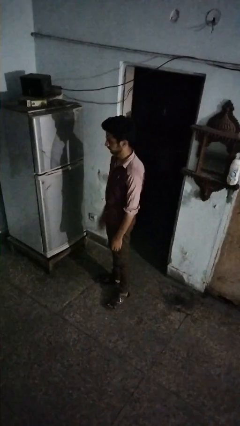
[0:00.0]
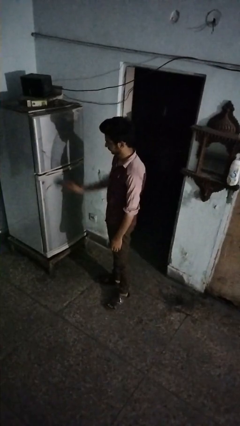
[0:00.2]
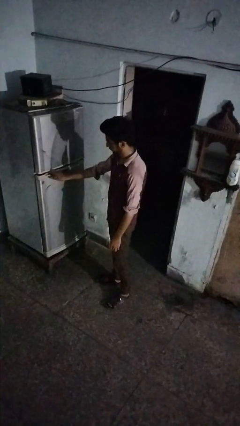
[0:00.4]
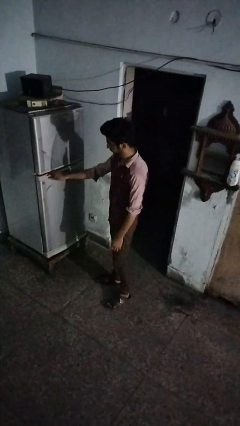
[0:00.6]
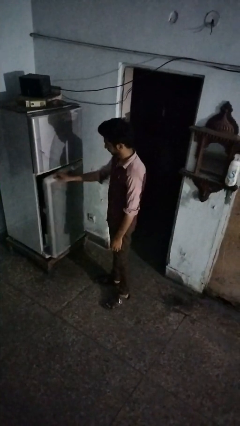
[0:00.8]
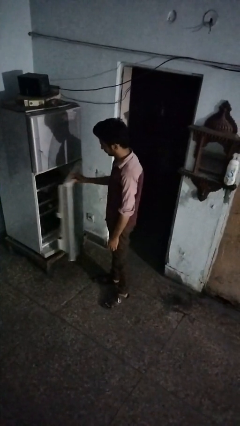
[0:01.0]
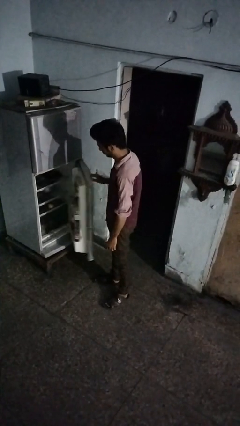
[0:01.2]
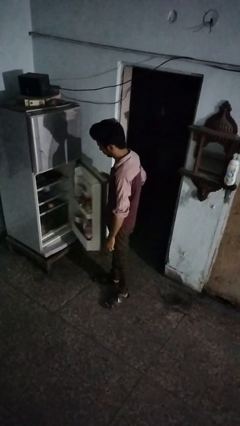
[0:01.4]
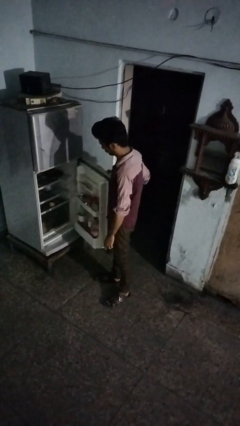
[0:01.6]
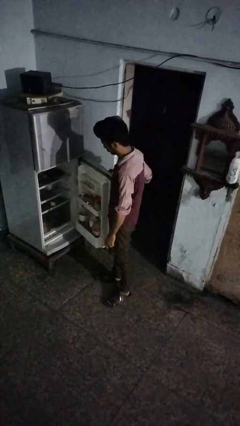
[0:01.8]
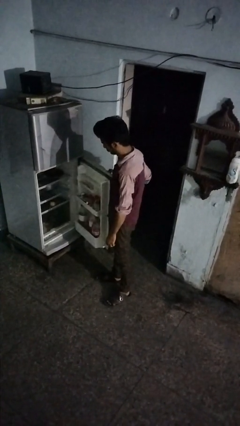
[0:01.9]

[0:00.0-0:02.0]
person opens refrigerator

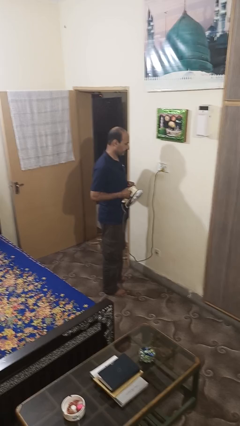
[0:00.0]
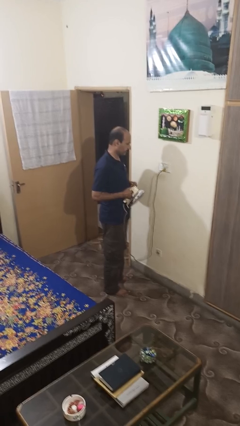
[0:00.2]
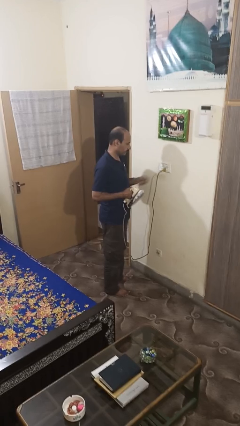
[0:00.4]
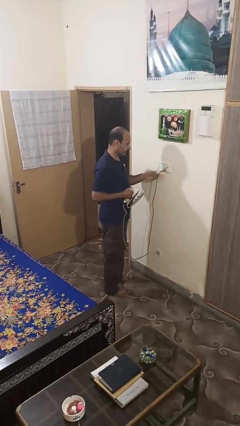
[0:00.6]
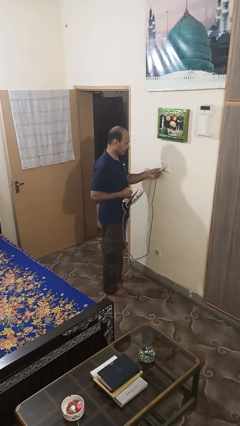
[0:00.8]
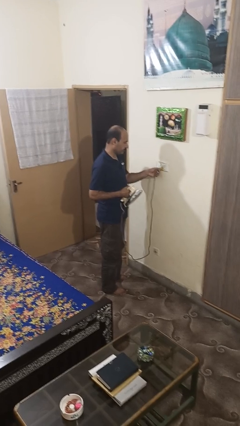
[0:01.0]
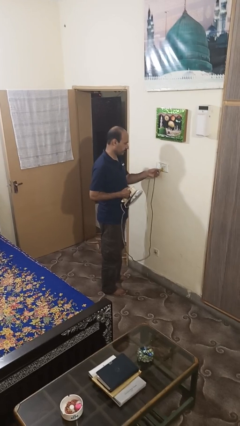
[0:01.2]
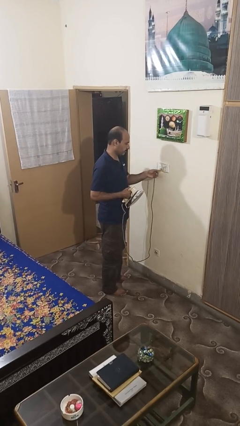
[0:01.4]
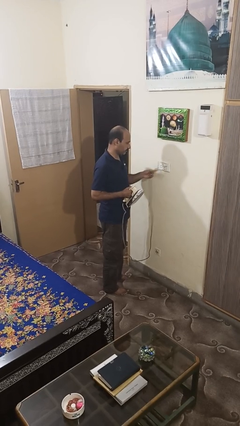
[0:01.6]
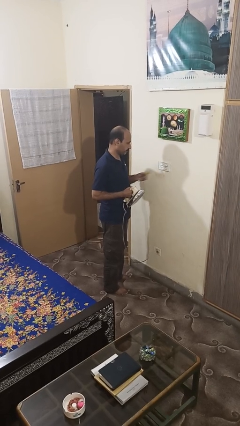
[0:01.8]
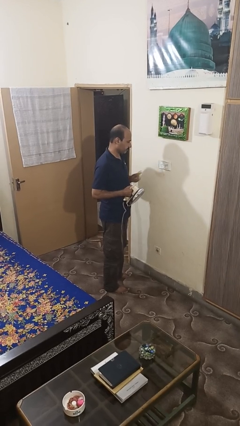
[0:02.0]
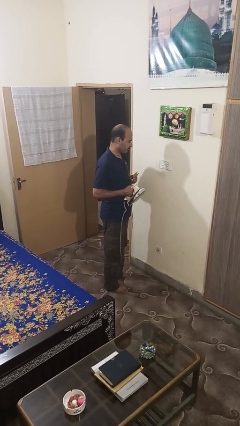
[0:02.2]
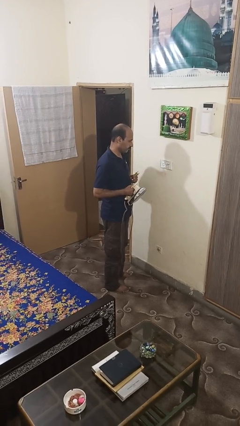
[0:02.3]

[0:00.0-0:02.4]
person unplugs from electrical socket

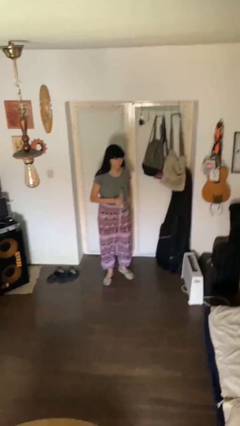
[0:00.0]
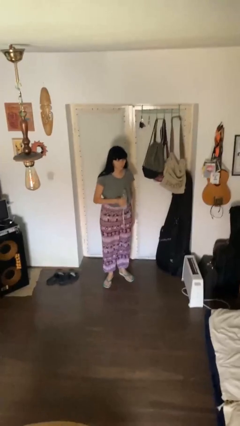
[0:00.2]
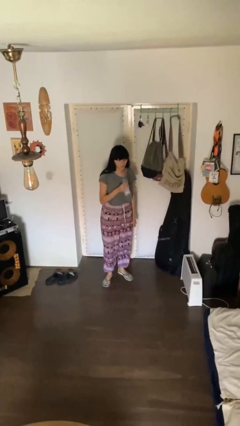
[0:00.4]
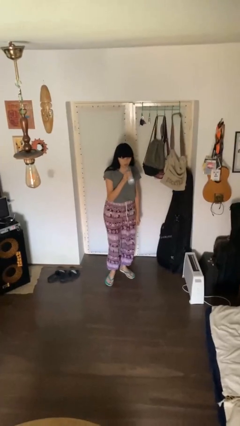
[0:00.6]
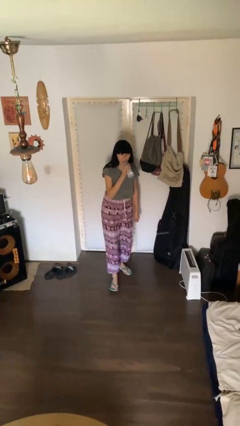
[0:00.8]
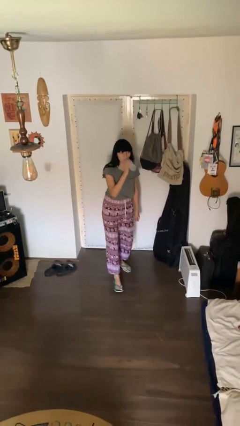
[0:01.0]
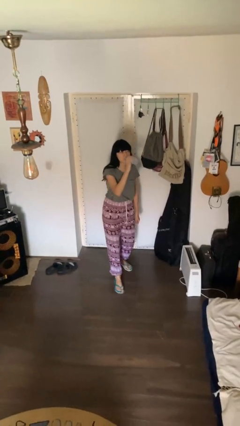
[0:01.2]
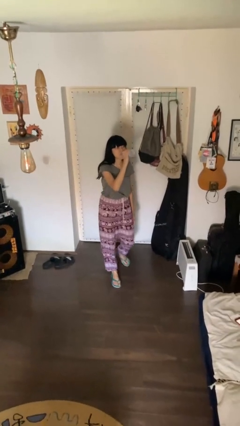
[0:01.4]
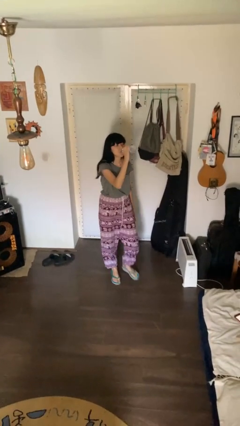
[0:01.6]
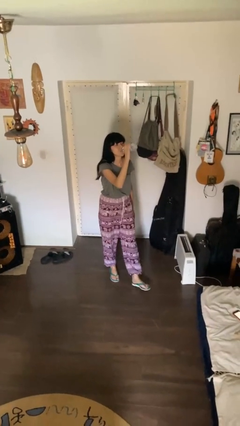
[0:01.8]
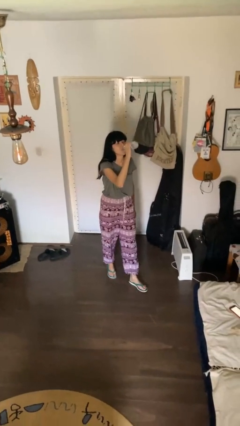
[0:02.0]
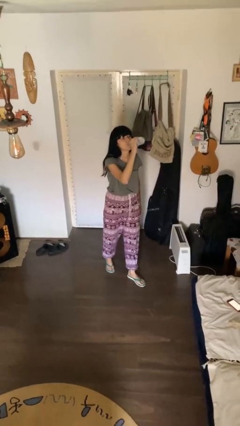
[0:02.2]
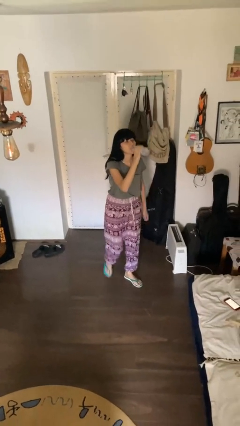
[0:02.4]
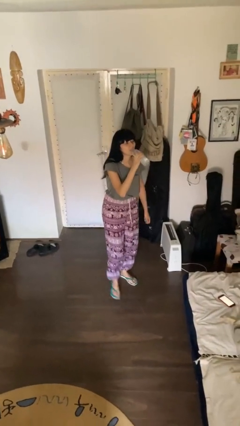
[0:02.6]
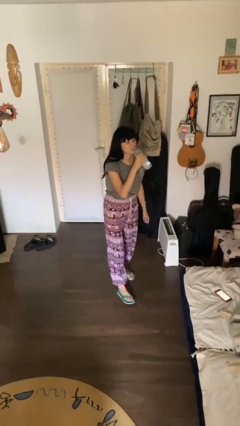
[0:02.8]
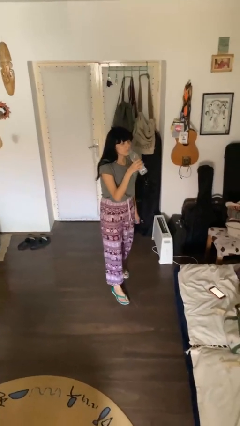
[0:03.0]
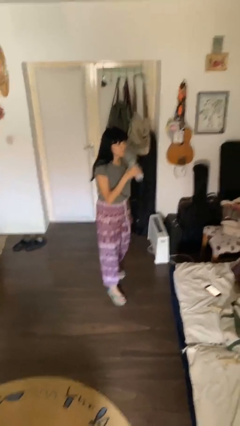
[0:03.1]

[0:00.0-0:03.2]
person drinks from bottle

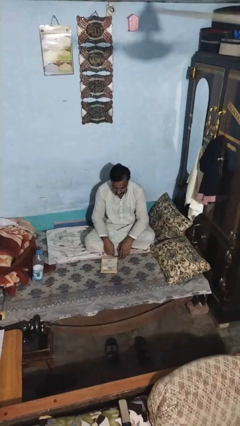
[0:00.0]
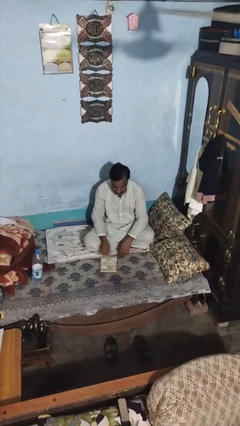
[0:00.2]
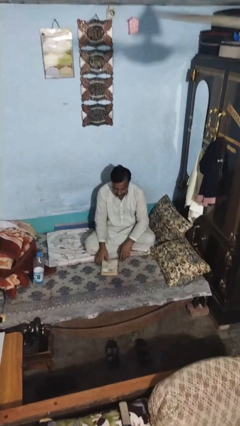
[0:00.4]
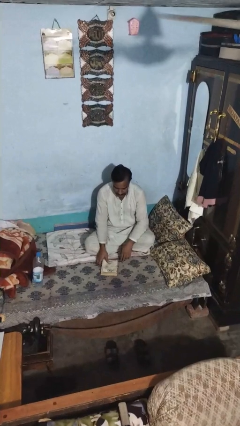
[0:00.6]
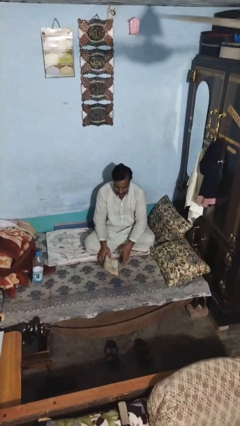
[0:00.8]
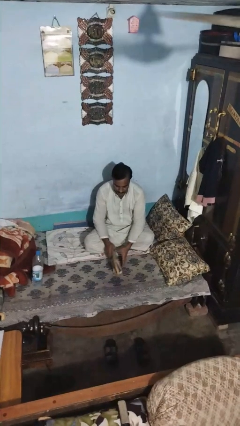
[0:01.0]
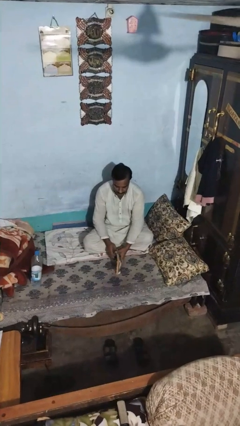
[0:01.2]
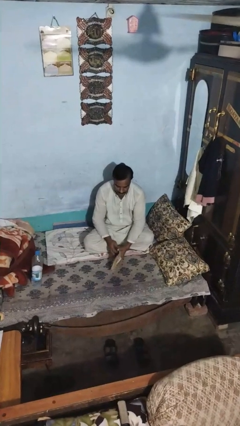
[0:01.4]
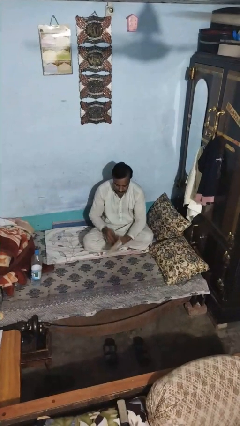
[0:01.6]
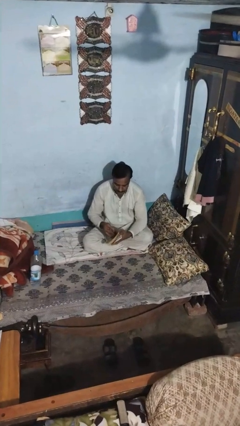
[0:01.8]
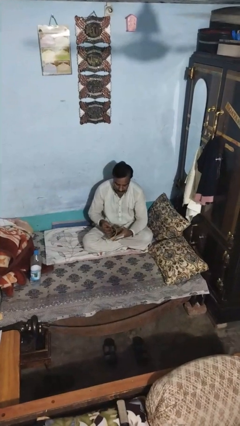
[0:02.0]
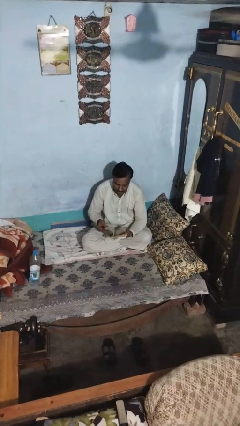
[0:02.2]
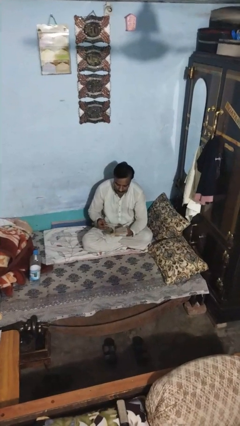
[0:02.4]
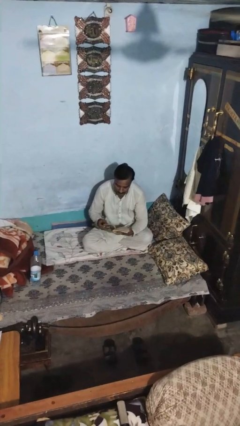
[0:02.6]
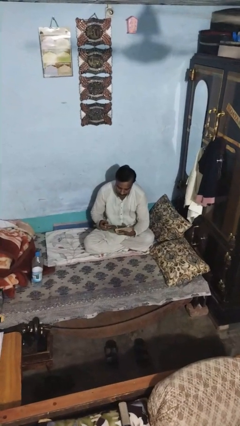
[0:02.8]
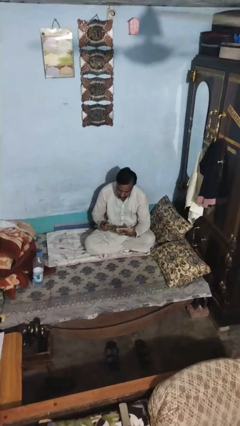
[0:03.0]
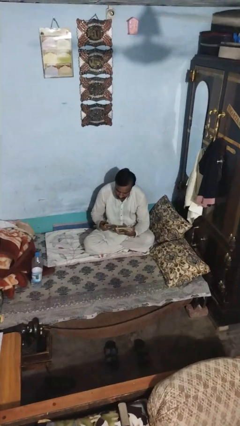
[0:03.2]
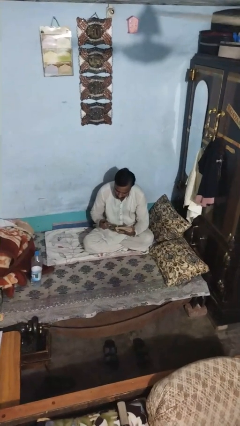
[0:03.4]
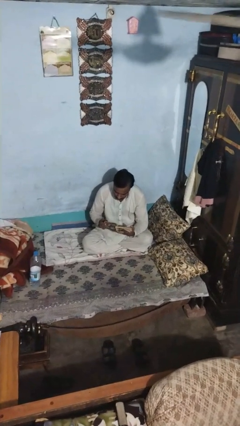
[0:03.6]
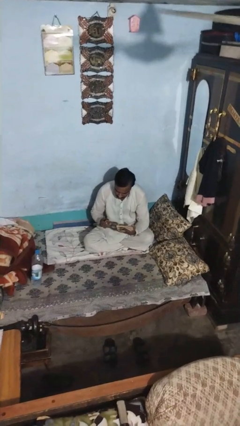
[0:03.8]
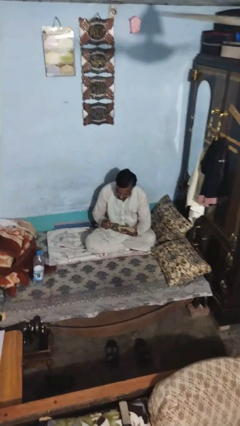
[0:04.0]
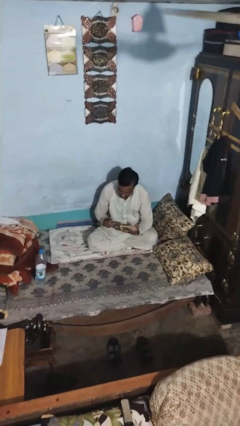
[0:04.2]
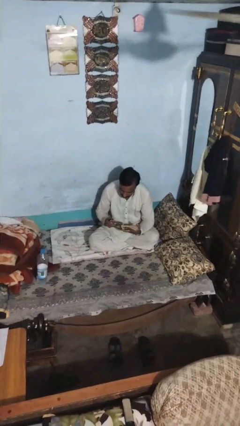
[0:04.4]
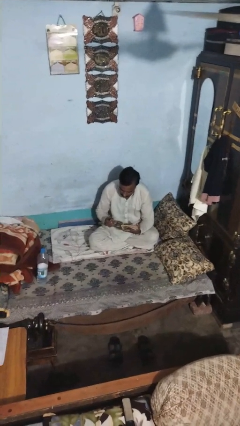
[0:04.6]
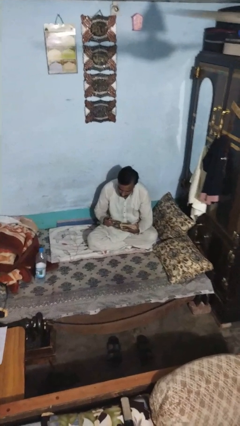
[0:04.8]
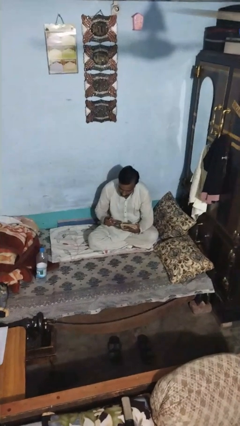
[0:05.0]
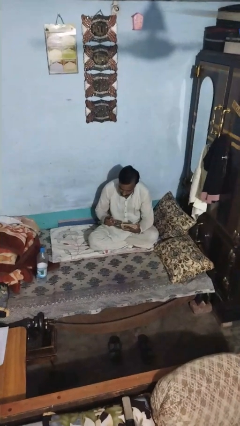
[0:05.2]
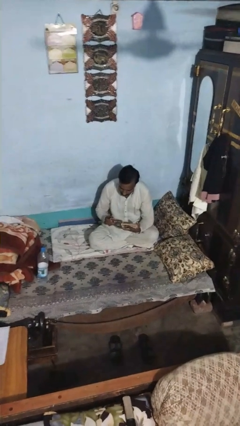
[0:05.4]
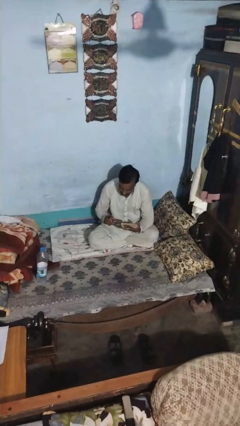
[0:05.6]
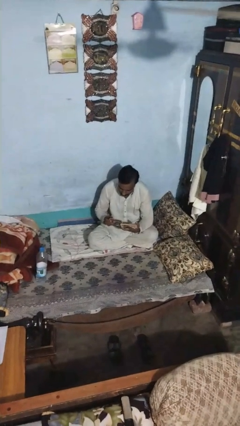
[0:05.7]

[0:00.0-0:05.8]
person reads magazine

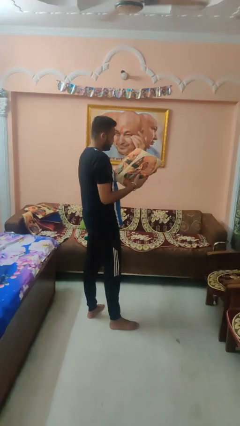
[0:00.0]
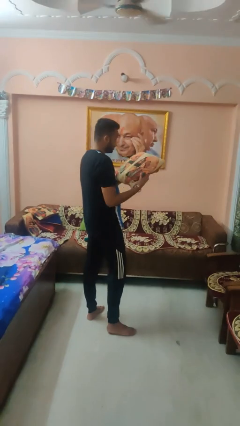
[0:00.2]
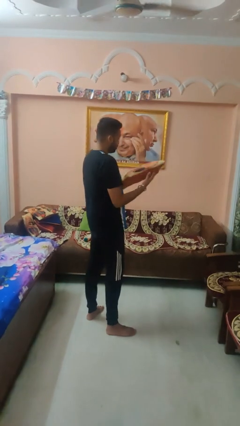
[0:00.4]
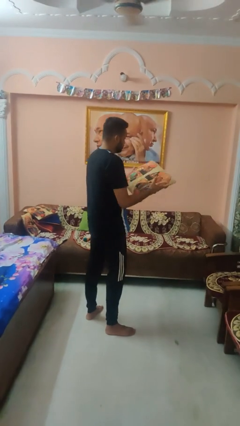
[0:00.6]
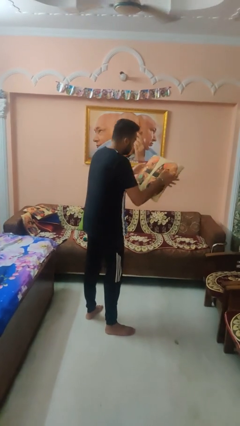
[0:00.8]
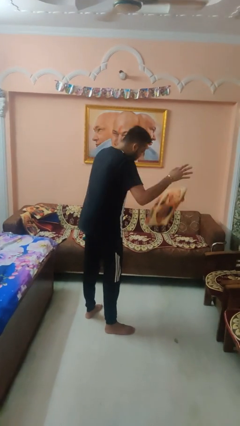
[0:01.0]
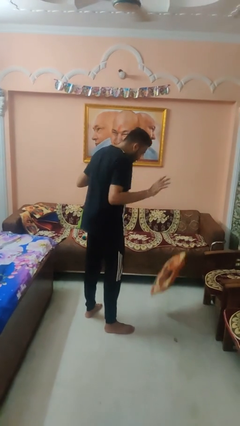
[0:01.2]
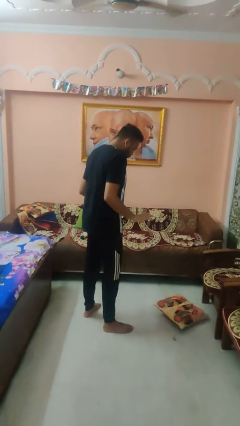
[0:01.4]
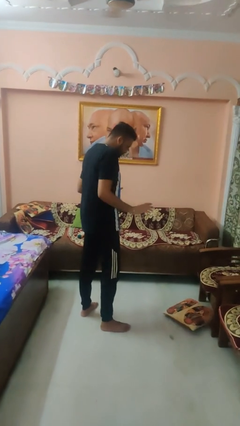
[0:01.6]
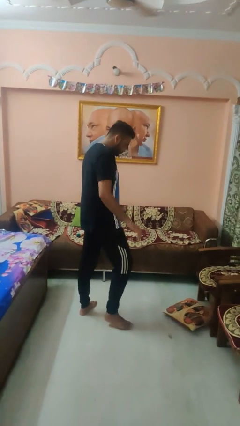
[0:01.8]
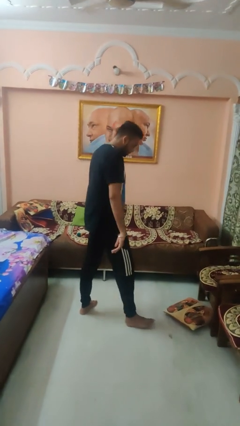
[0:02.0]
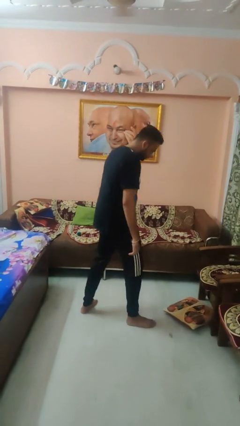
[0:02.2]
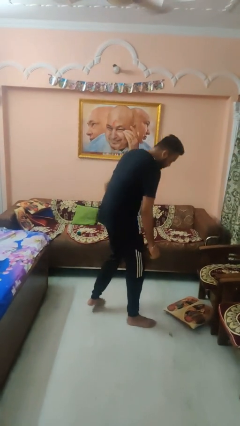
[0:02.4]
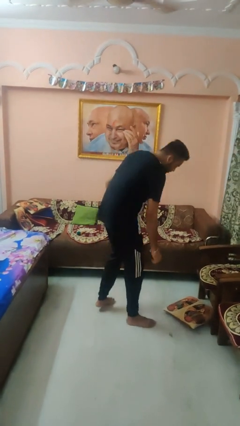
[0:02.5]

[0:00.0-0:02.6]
person drops object

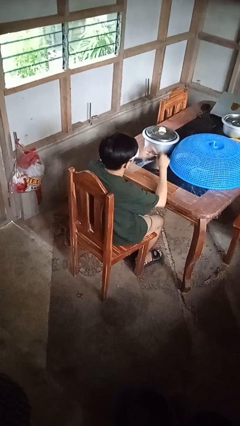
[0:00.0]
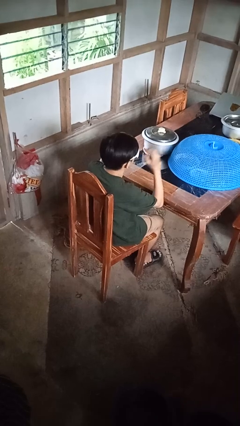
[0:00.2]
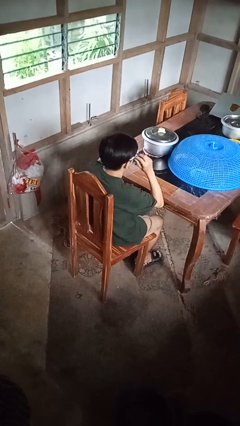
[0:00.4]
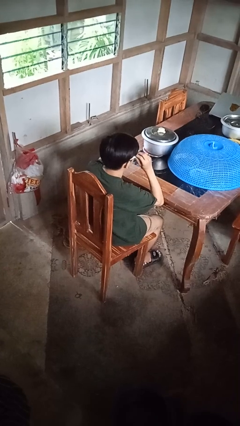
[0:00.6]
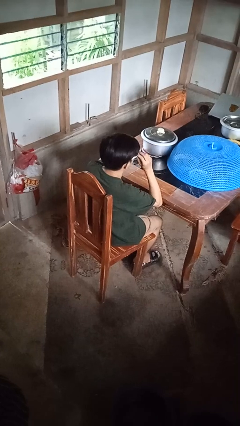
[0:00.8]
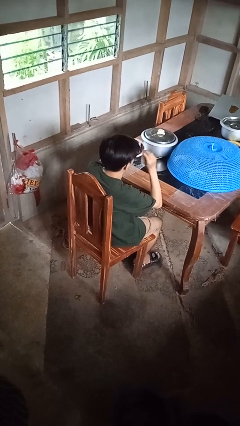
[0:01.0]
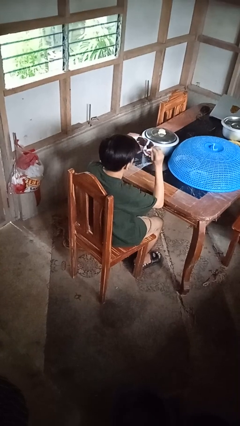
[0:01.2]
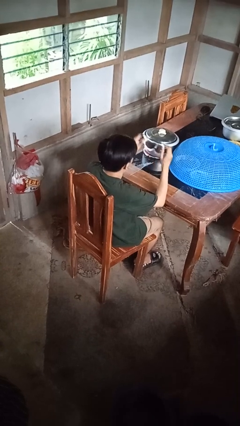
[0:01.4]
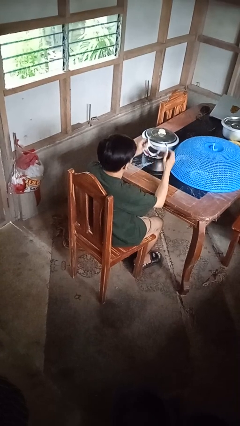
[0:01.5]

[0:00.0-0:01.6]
person takes off sunglasses
